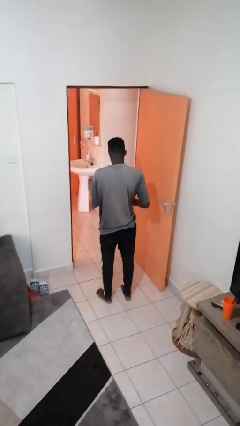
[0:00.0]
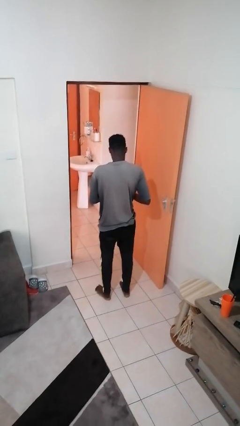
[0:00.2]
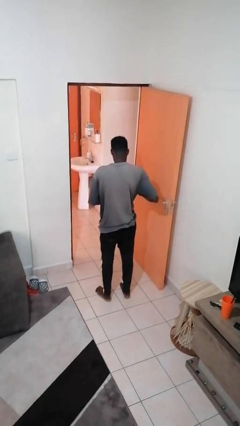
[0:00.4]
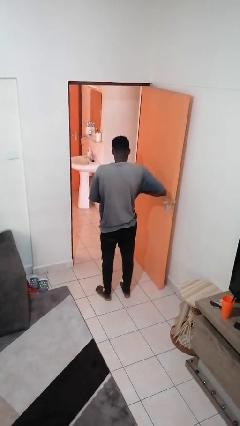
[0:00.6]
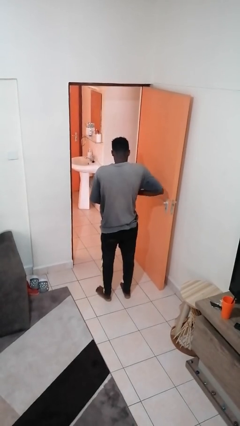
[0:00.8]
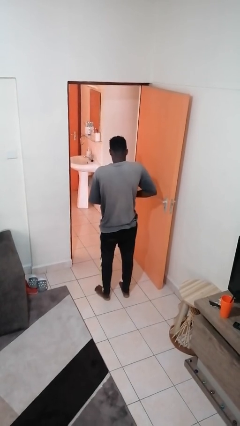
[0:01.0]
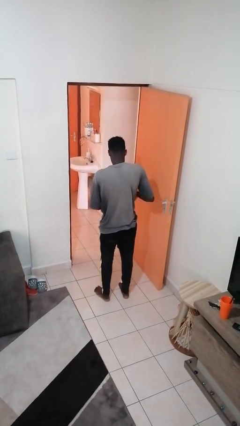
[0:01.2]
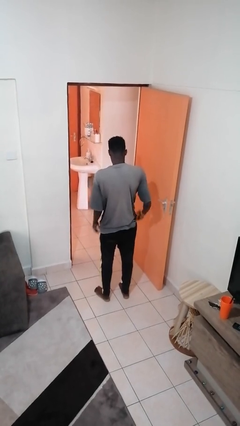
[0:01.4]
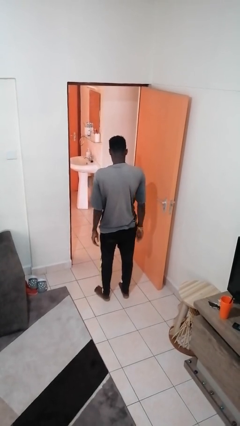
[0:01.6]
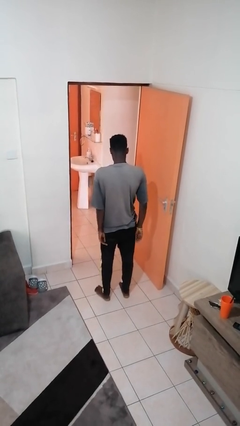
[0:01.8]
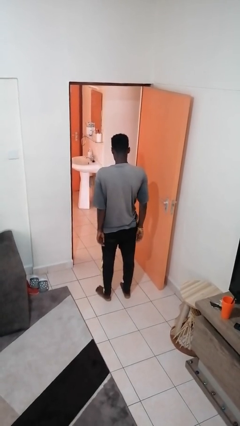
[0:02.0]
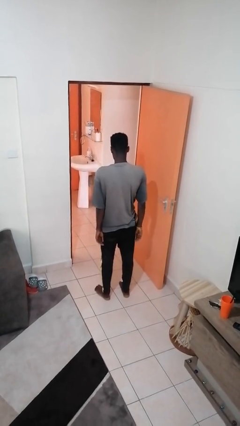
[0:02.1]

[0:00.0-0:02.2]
person puts phone into pocket

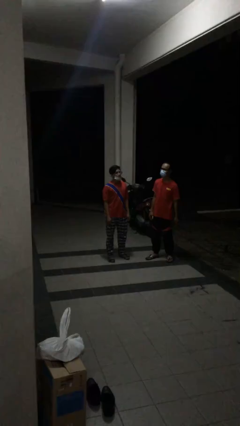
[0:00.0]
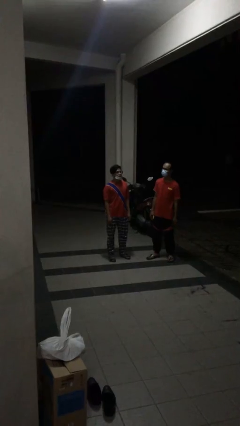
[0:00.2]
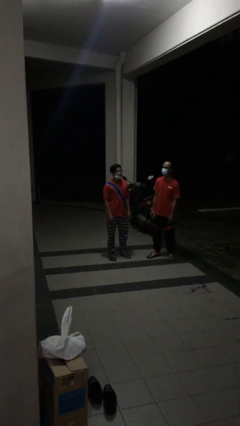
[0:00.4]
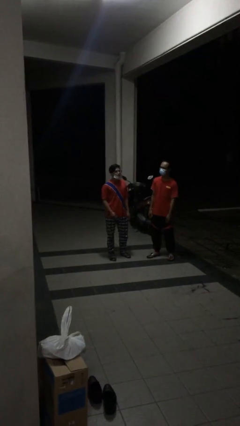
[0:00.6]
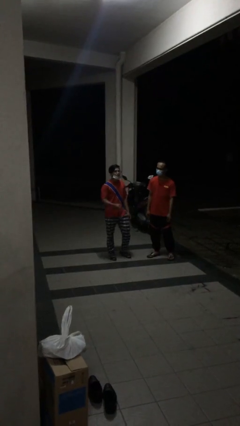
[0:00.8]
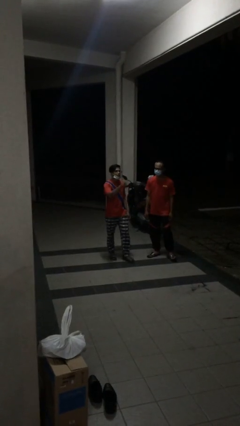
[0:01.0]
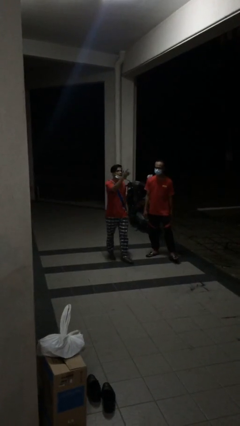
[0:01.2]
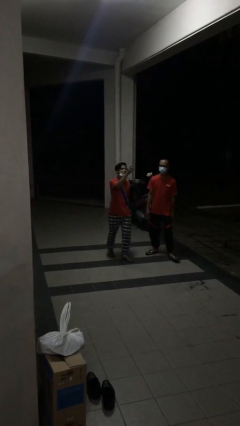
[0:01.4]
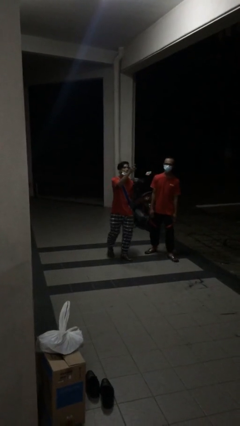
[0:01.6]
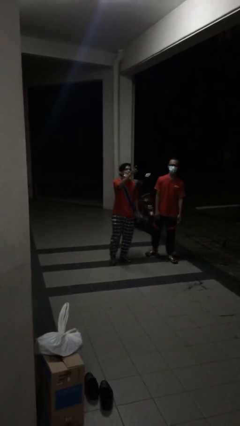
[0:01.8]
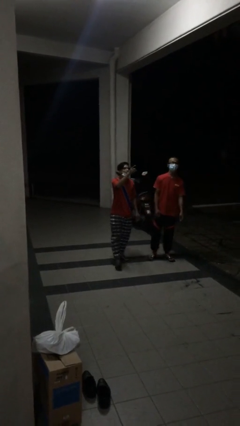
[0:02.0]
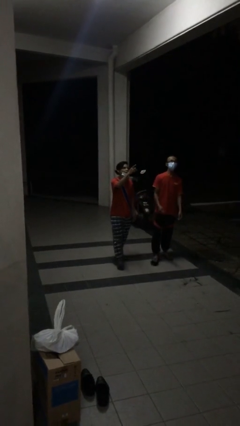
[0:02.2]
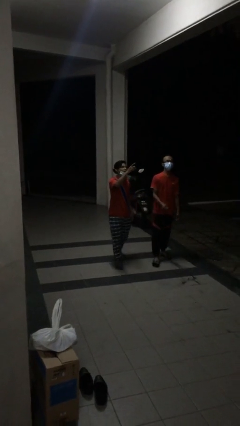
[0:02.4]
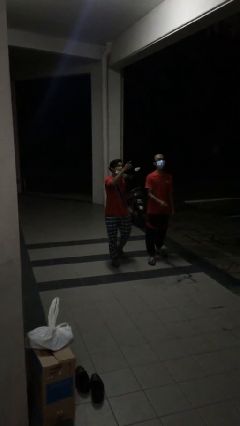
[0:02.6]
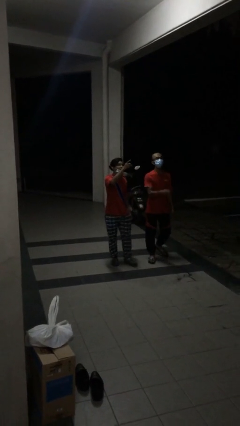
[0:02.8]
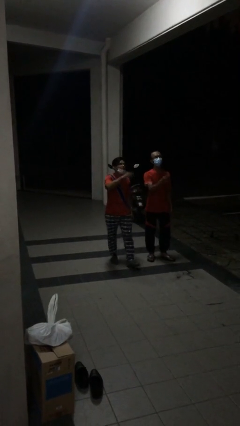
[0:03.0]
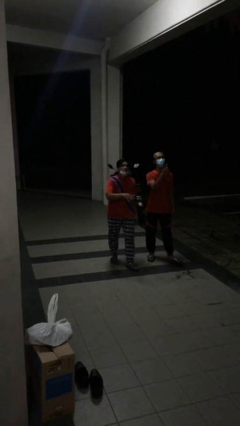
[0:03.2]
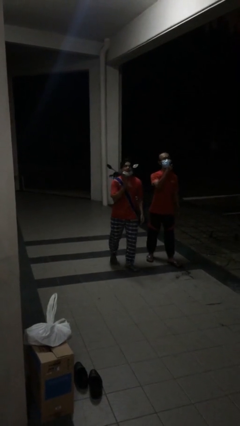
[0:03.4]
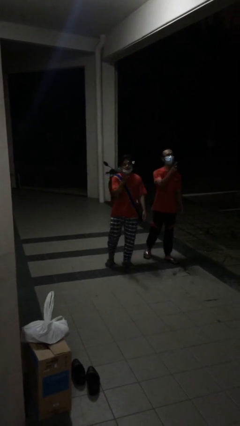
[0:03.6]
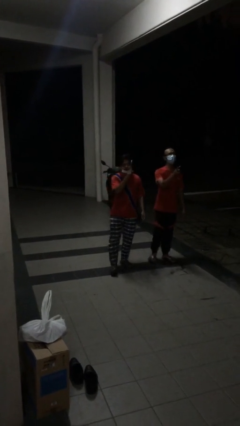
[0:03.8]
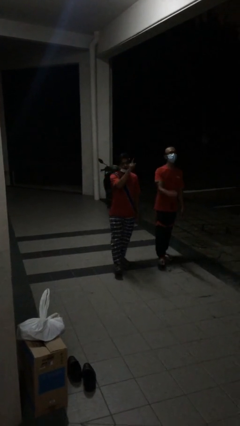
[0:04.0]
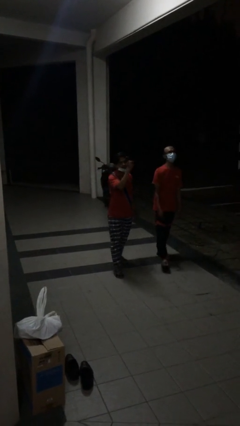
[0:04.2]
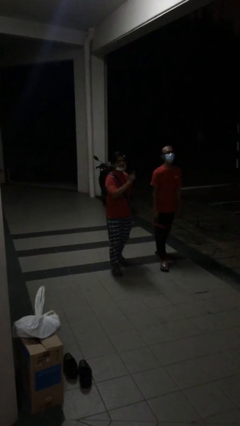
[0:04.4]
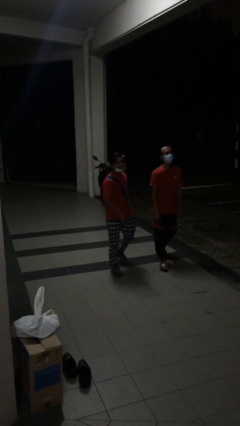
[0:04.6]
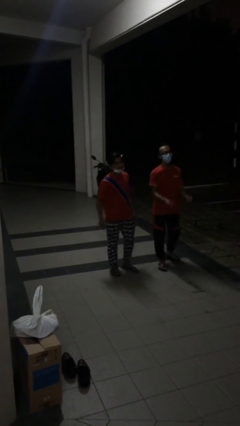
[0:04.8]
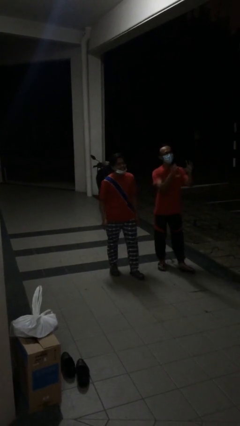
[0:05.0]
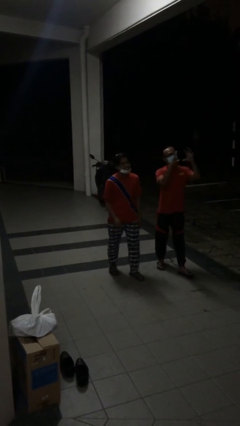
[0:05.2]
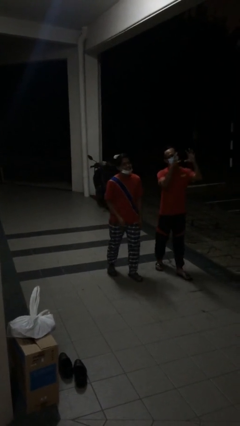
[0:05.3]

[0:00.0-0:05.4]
person talks to person

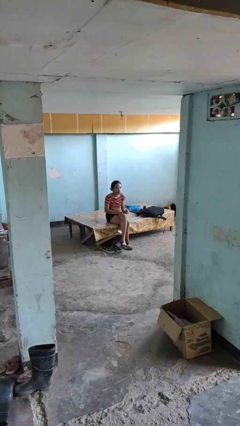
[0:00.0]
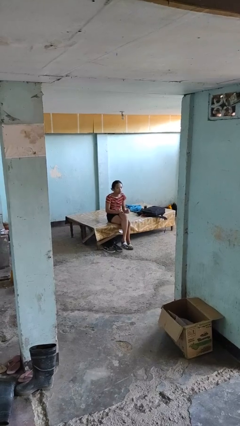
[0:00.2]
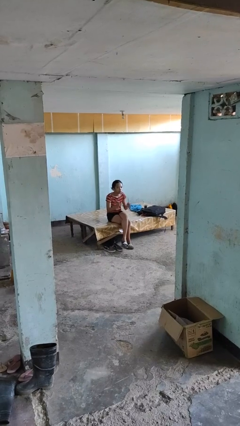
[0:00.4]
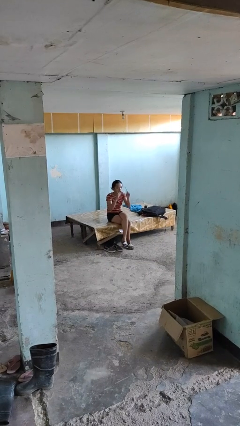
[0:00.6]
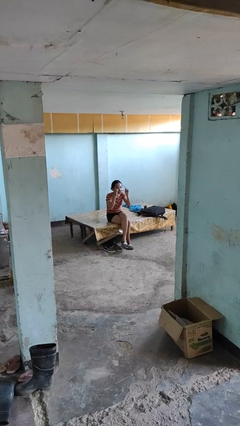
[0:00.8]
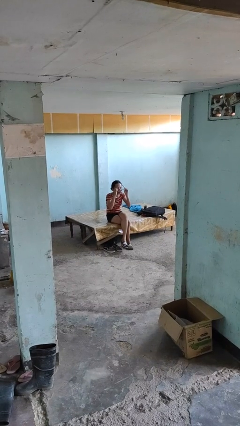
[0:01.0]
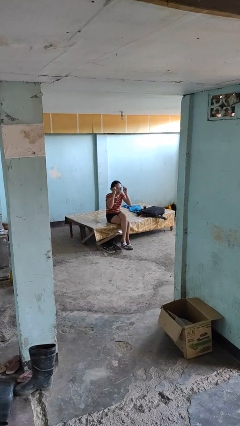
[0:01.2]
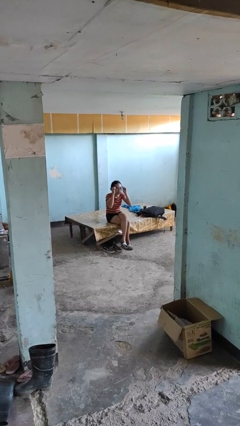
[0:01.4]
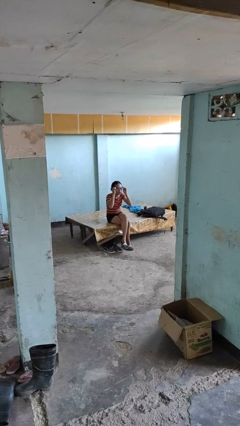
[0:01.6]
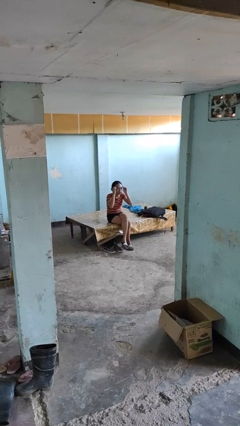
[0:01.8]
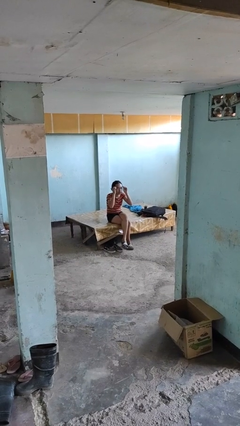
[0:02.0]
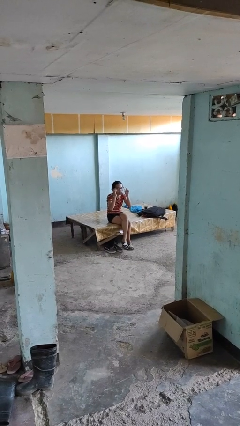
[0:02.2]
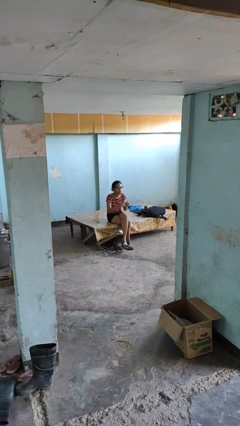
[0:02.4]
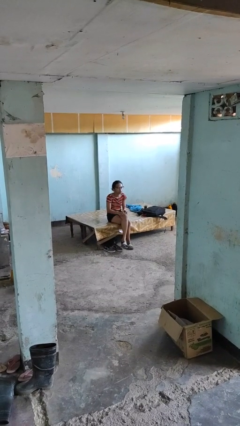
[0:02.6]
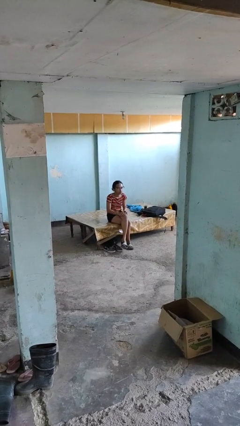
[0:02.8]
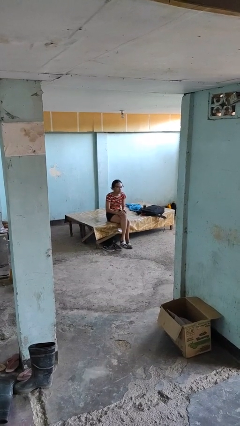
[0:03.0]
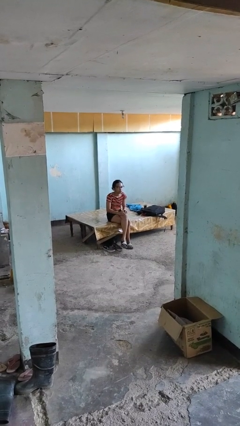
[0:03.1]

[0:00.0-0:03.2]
person puts on glasses

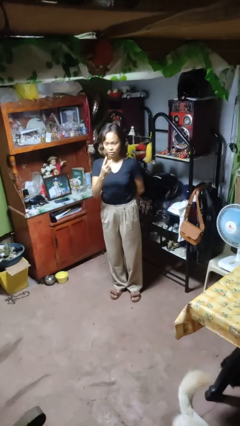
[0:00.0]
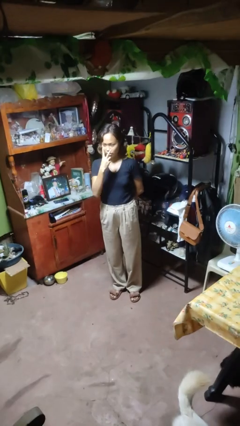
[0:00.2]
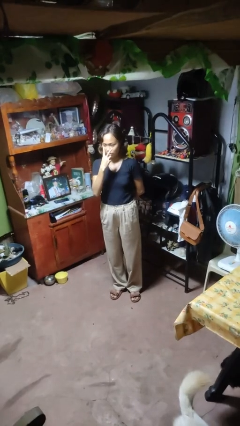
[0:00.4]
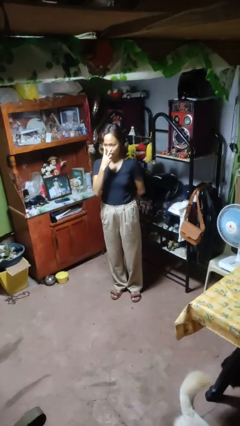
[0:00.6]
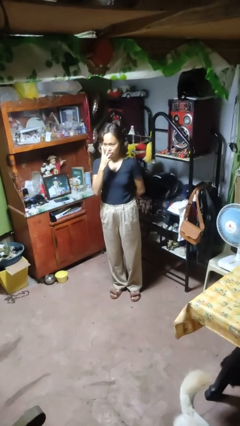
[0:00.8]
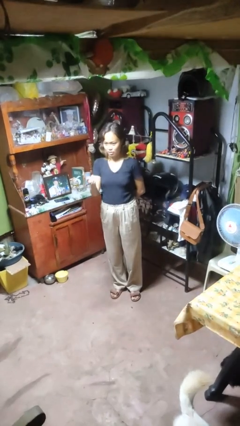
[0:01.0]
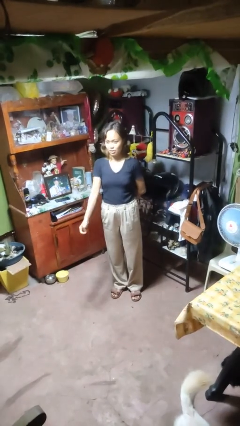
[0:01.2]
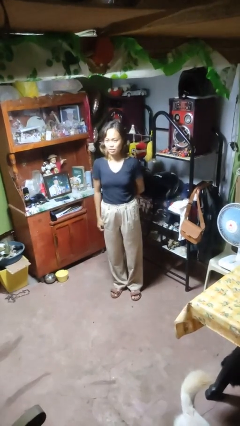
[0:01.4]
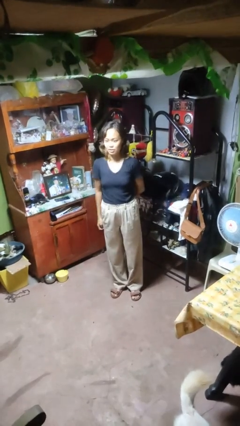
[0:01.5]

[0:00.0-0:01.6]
person gestures watch closely

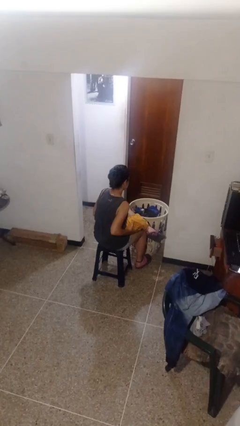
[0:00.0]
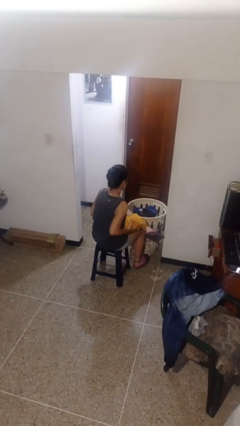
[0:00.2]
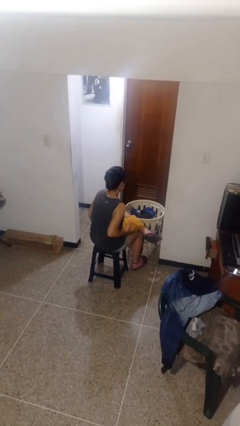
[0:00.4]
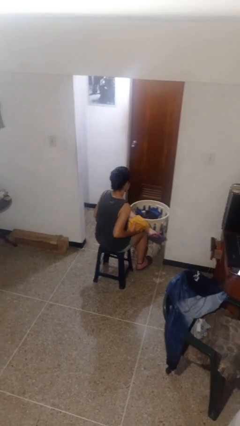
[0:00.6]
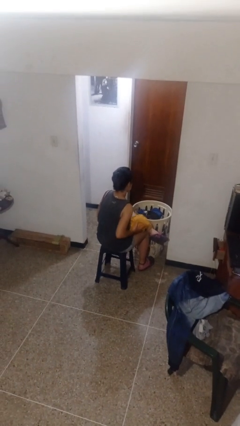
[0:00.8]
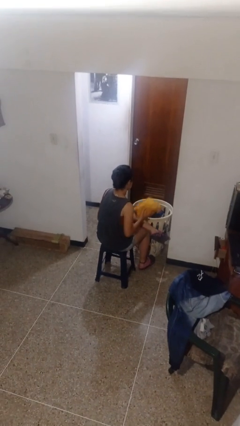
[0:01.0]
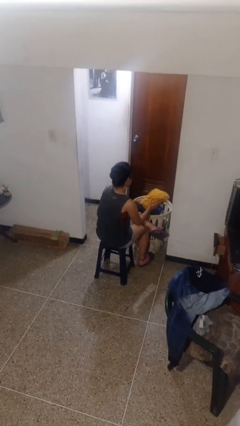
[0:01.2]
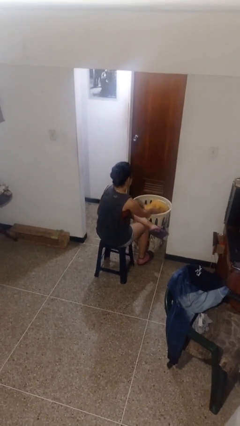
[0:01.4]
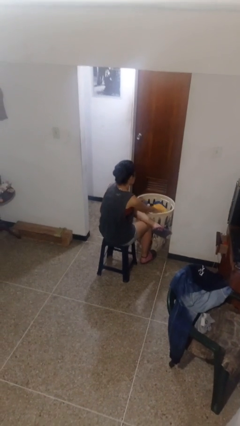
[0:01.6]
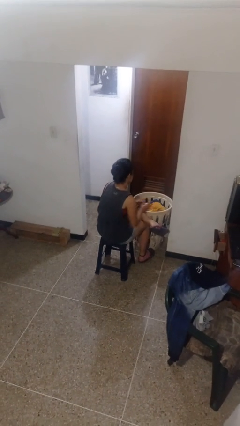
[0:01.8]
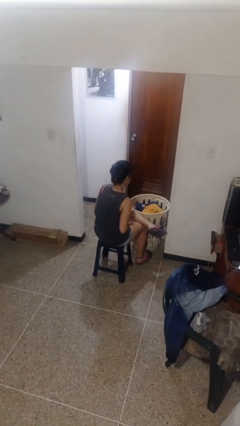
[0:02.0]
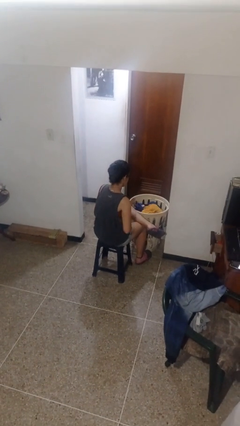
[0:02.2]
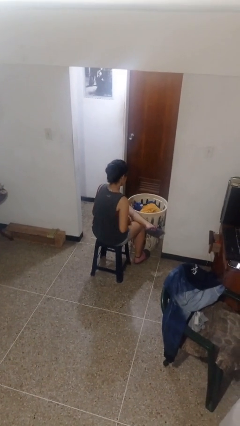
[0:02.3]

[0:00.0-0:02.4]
person puts object into basket

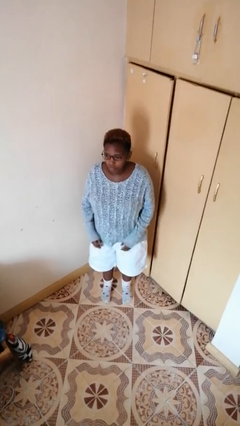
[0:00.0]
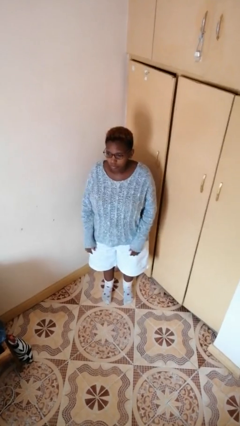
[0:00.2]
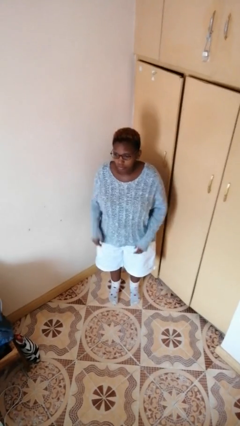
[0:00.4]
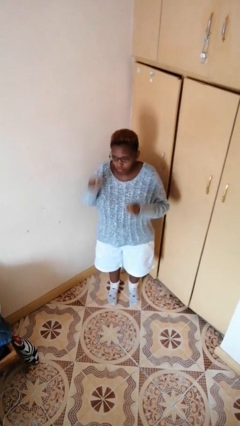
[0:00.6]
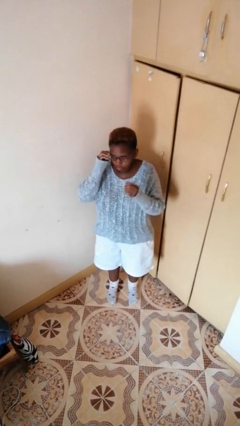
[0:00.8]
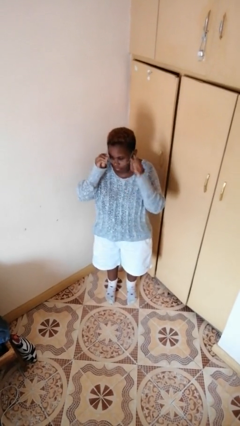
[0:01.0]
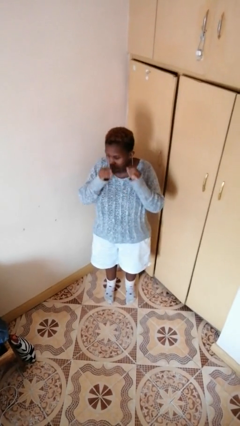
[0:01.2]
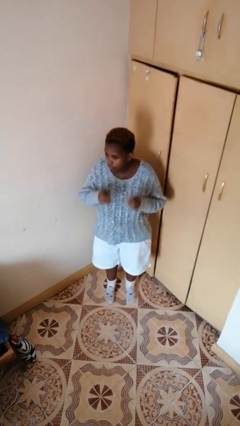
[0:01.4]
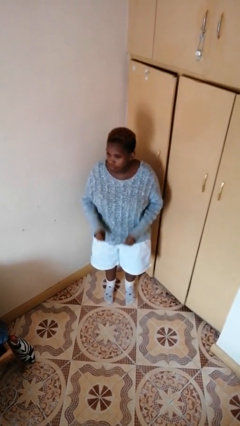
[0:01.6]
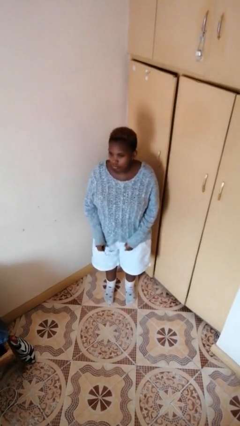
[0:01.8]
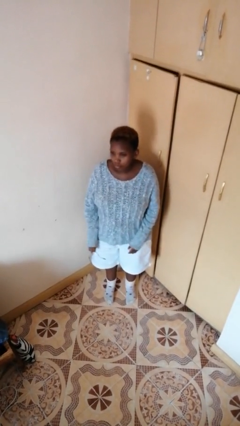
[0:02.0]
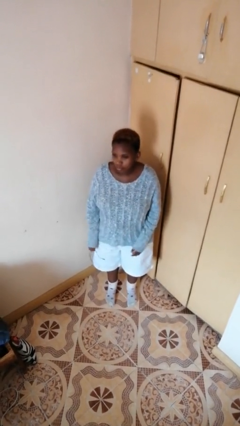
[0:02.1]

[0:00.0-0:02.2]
person takes off glasses

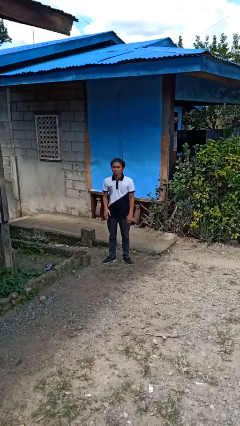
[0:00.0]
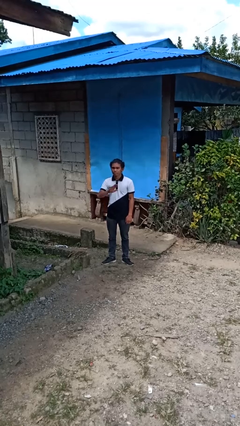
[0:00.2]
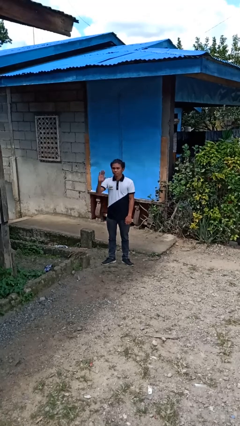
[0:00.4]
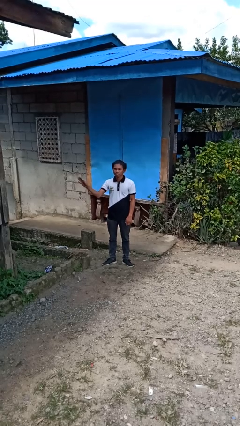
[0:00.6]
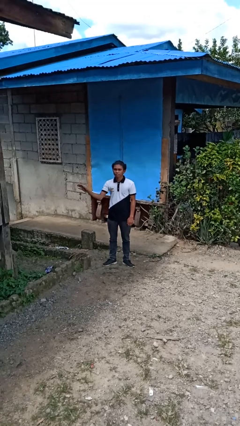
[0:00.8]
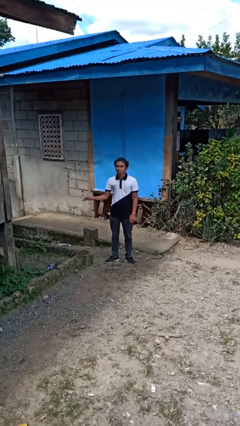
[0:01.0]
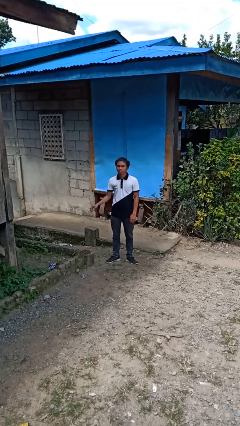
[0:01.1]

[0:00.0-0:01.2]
person gestures swipe right
